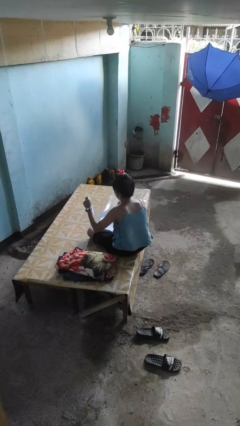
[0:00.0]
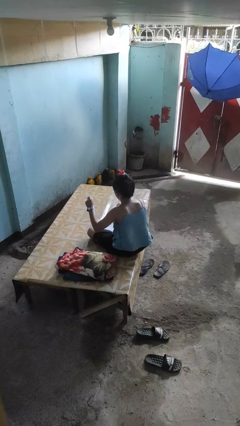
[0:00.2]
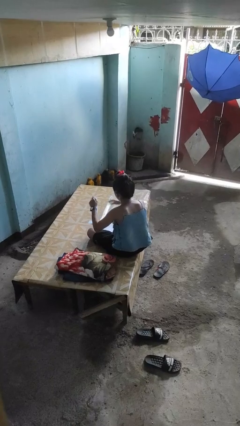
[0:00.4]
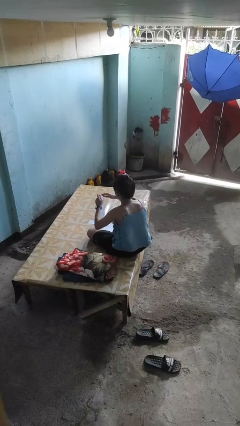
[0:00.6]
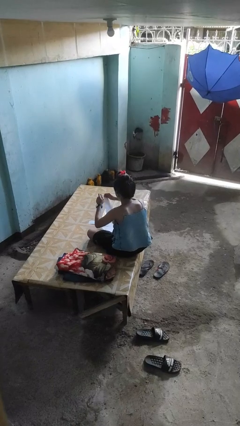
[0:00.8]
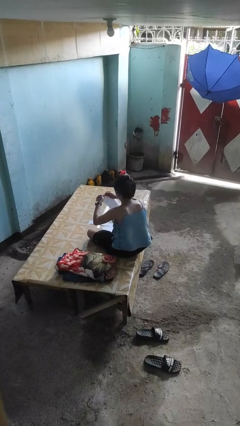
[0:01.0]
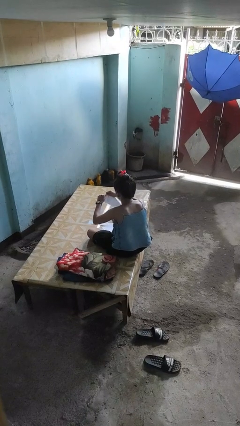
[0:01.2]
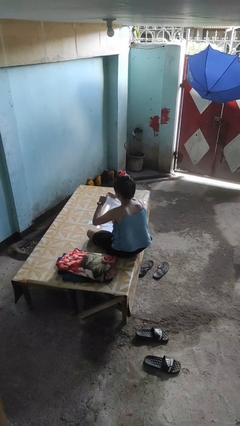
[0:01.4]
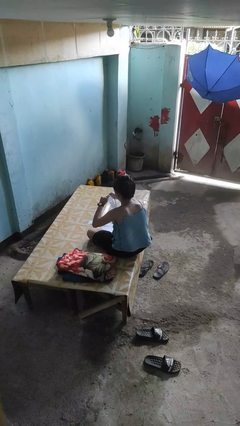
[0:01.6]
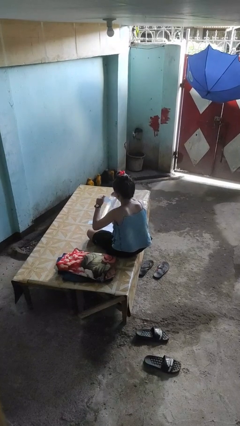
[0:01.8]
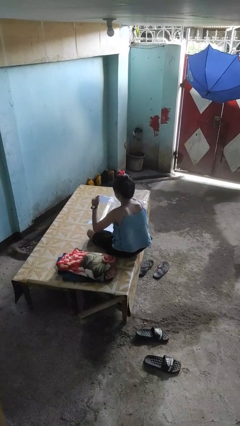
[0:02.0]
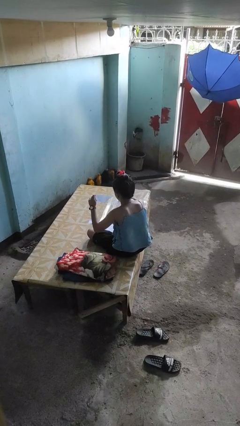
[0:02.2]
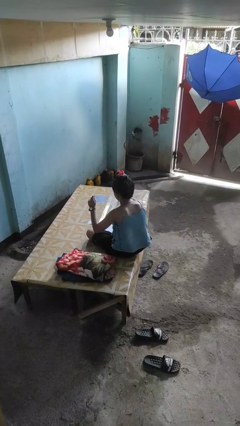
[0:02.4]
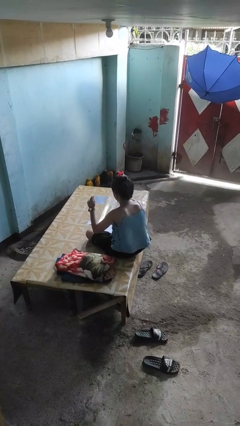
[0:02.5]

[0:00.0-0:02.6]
person tears paper

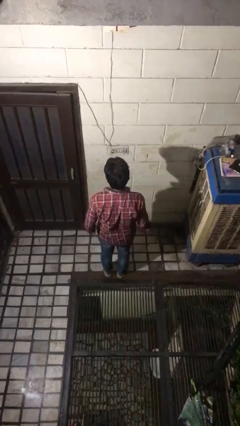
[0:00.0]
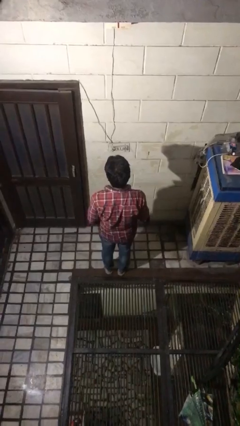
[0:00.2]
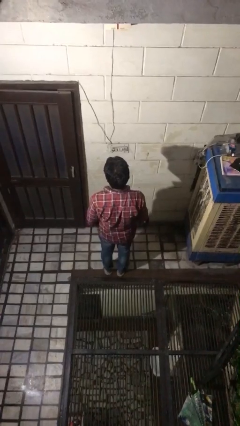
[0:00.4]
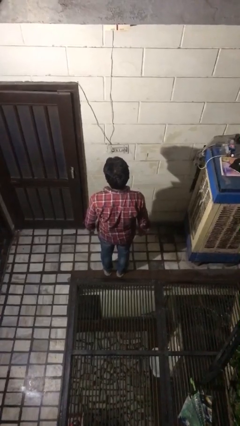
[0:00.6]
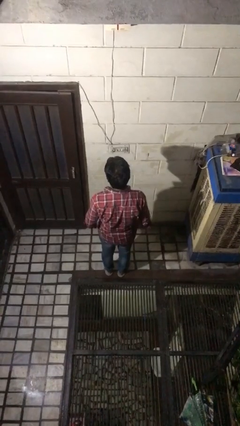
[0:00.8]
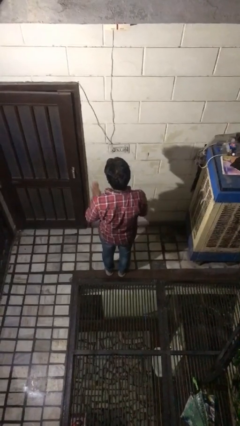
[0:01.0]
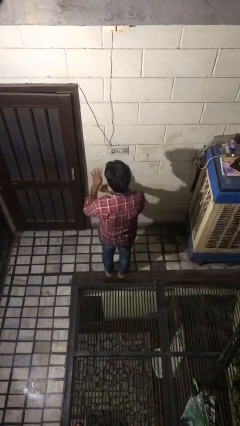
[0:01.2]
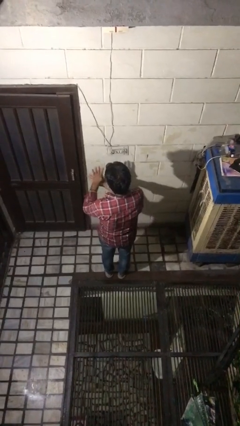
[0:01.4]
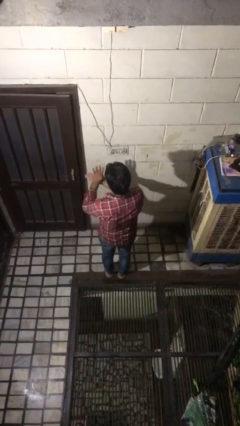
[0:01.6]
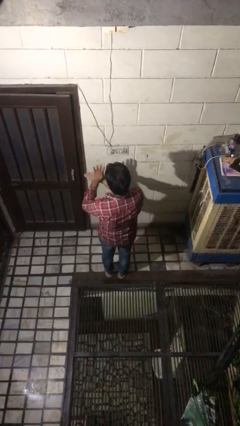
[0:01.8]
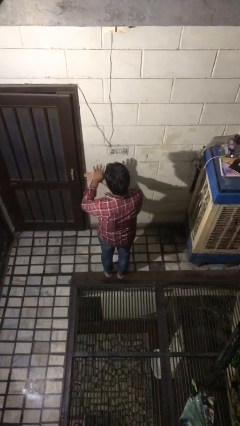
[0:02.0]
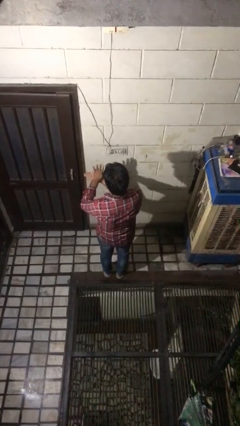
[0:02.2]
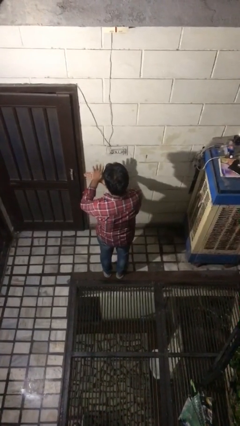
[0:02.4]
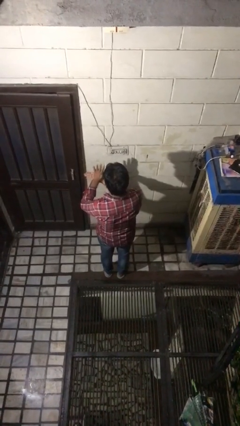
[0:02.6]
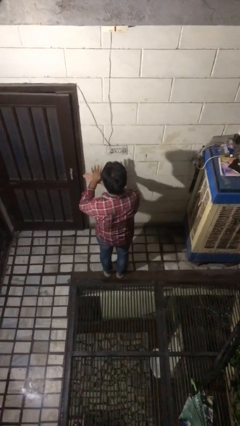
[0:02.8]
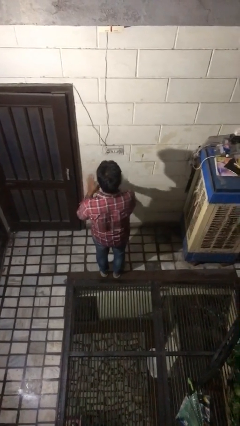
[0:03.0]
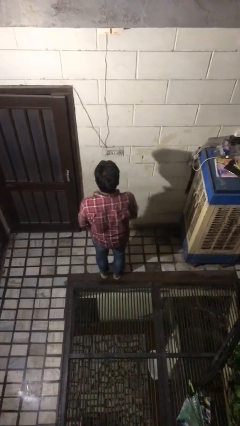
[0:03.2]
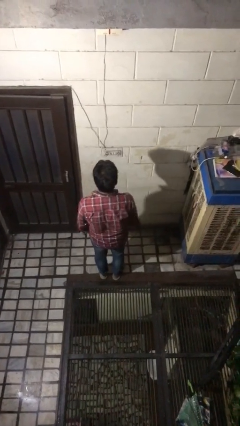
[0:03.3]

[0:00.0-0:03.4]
person gestures number four

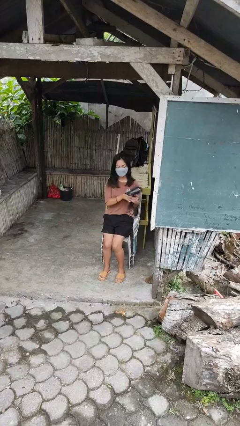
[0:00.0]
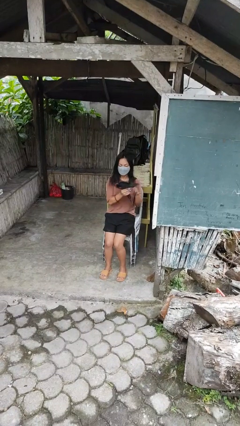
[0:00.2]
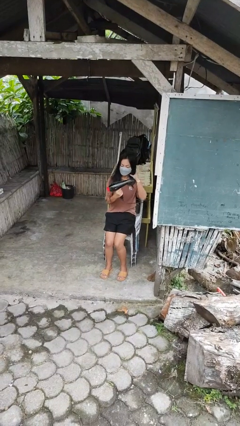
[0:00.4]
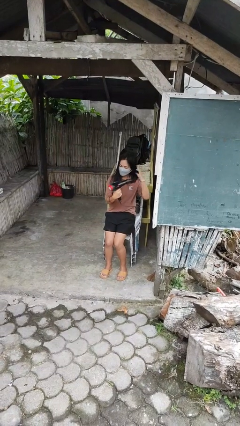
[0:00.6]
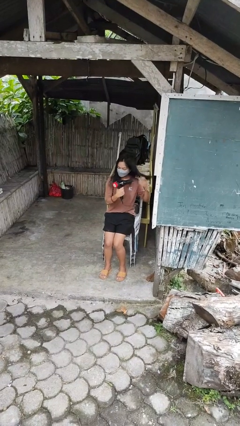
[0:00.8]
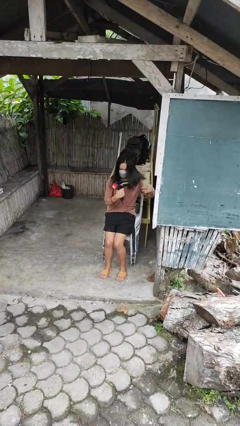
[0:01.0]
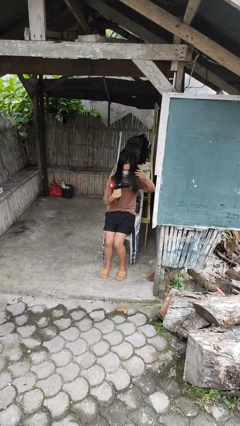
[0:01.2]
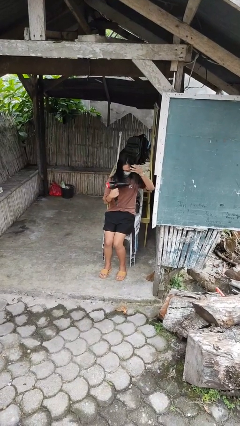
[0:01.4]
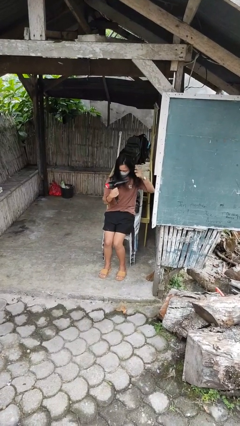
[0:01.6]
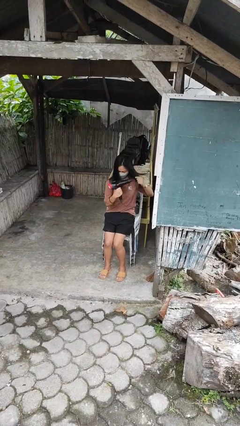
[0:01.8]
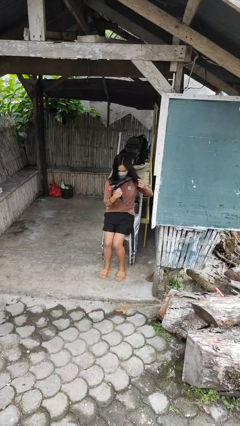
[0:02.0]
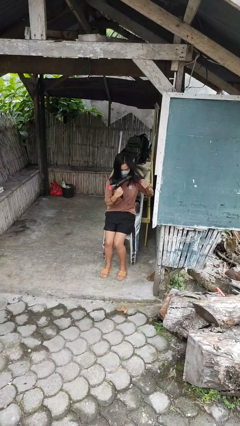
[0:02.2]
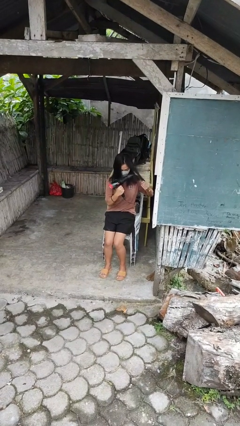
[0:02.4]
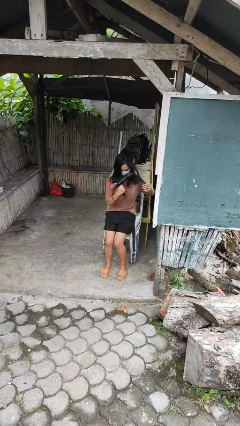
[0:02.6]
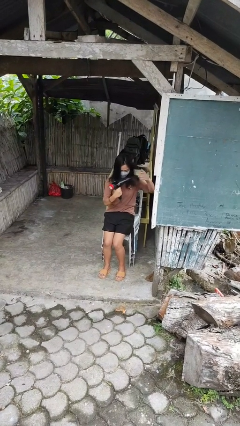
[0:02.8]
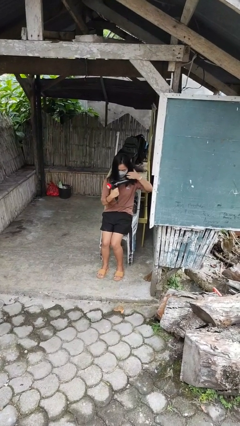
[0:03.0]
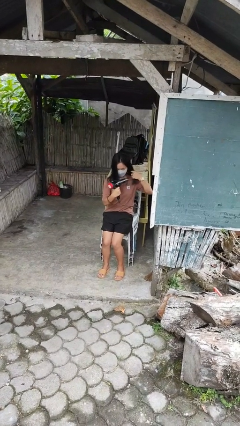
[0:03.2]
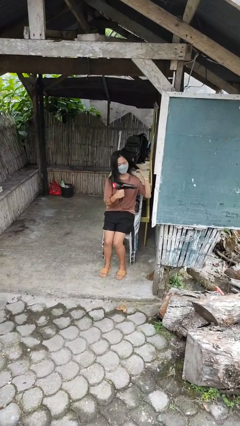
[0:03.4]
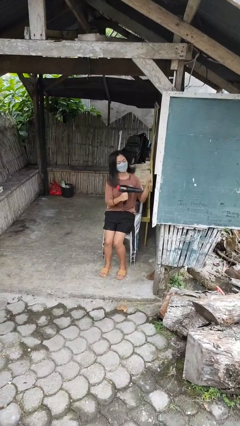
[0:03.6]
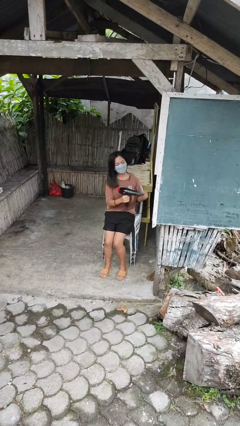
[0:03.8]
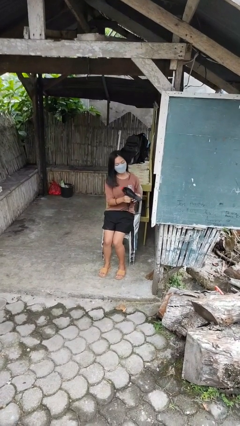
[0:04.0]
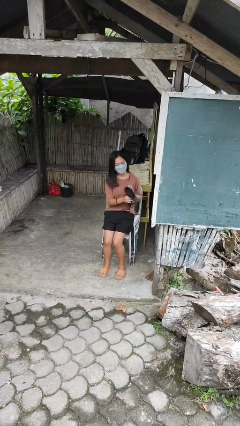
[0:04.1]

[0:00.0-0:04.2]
person dries hair with hairdryer

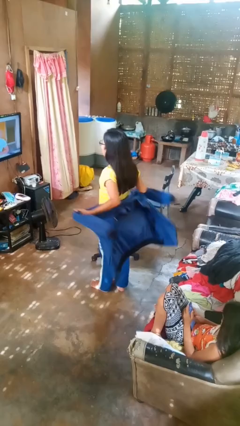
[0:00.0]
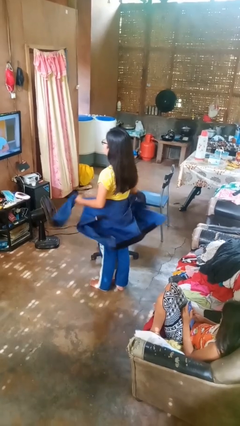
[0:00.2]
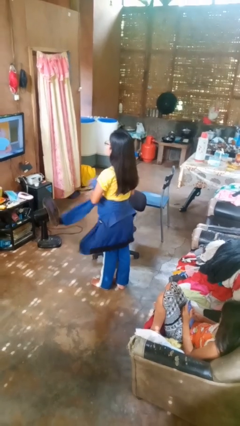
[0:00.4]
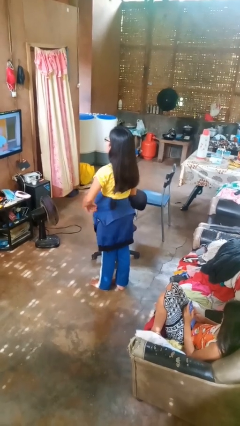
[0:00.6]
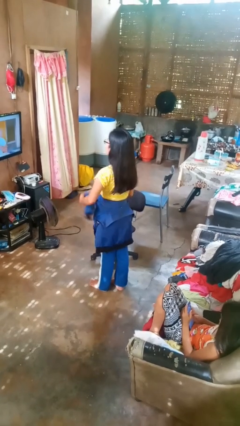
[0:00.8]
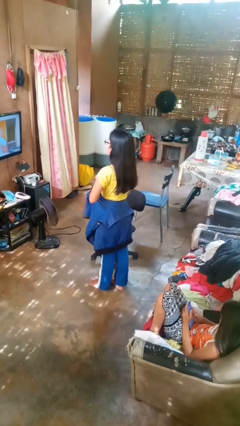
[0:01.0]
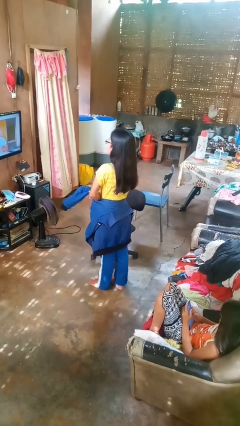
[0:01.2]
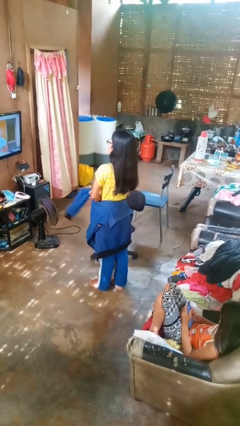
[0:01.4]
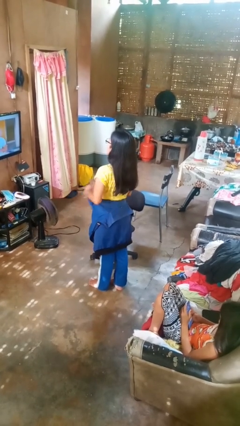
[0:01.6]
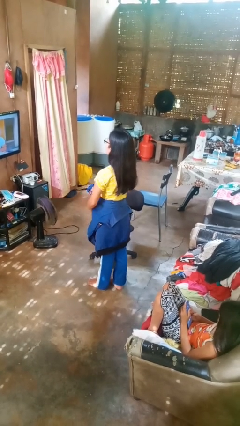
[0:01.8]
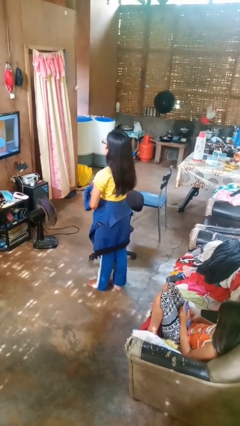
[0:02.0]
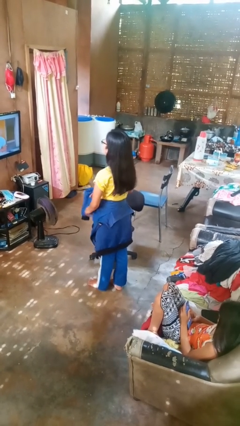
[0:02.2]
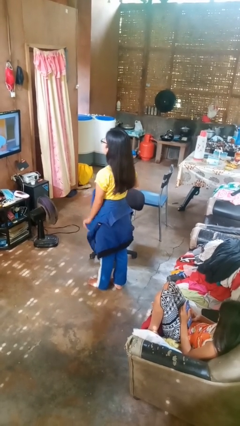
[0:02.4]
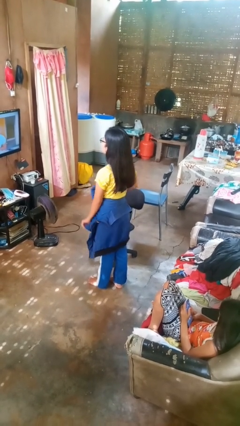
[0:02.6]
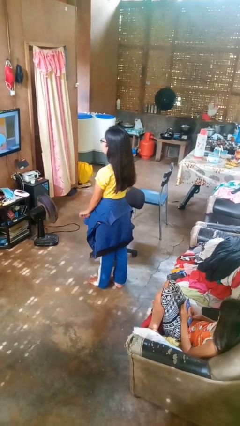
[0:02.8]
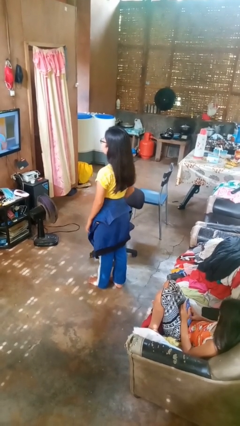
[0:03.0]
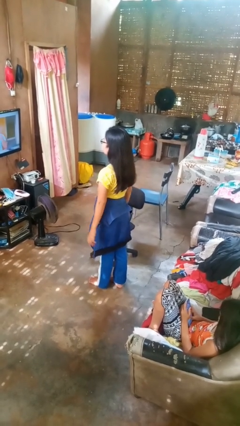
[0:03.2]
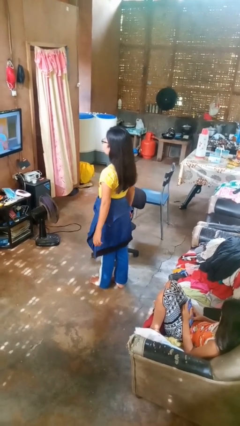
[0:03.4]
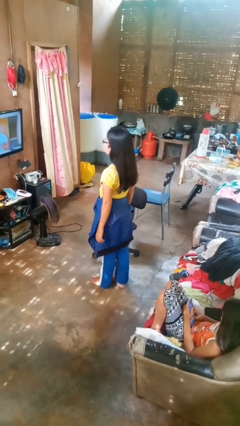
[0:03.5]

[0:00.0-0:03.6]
person ties jacket around waist

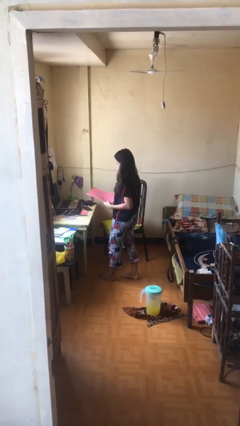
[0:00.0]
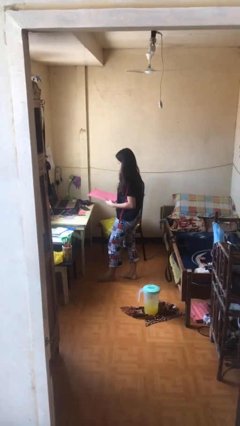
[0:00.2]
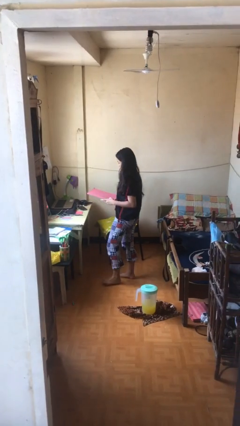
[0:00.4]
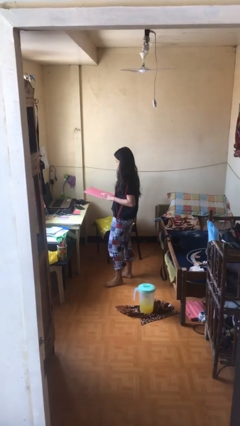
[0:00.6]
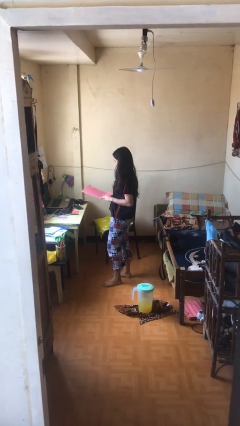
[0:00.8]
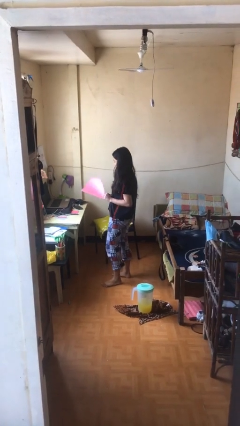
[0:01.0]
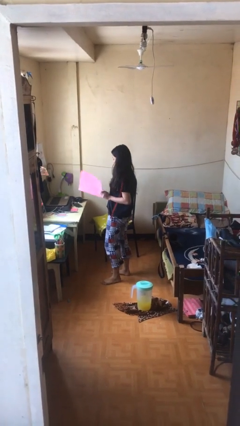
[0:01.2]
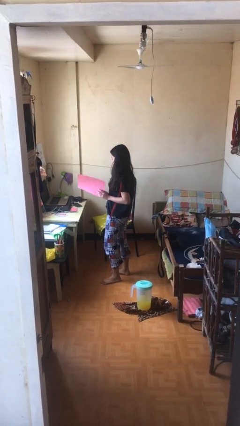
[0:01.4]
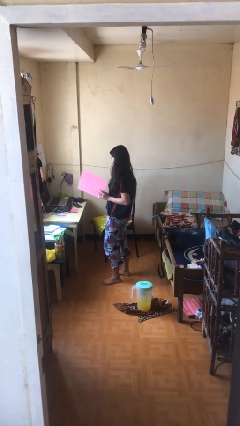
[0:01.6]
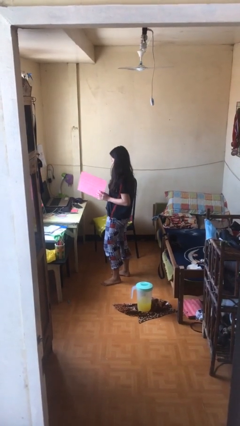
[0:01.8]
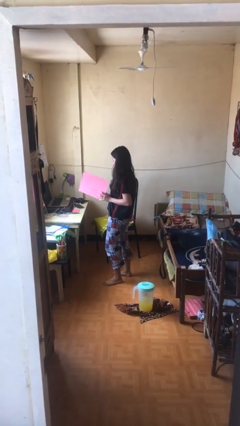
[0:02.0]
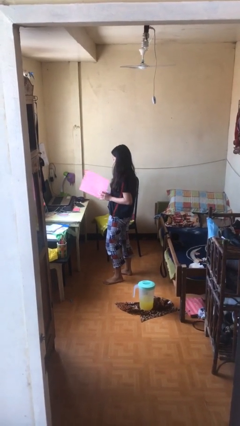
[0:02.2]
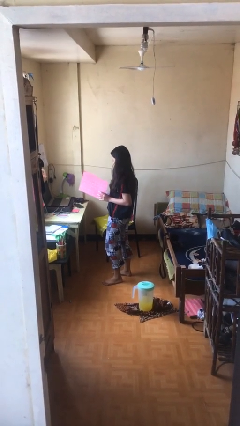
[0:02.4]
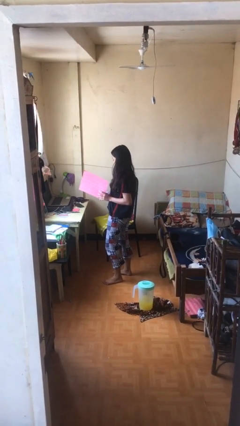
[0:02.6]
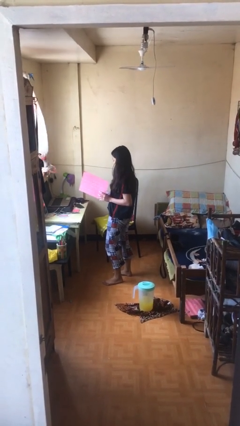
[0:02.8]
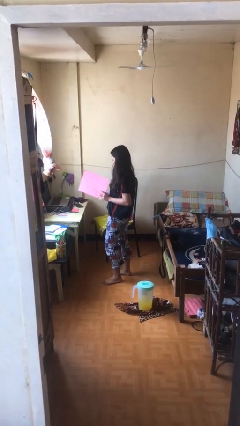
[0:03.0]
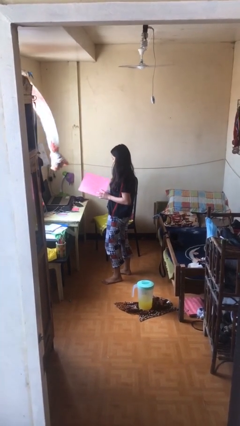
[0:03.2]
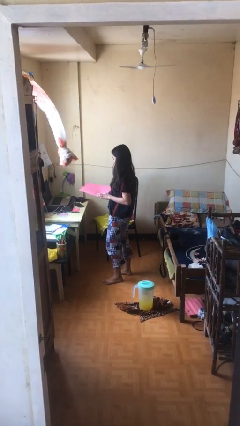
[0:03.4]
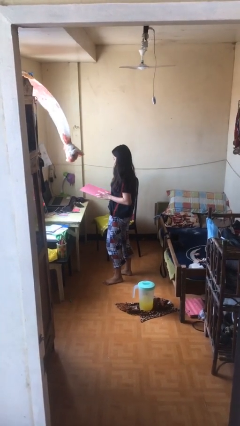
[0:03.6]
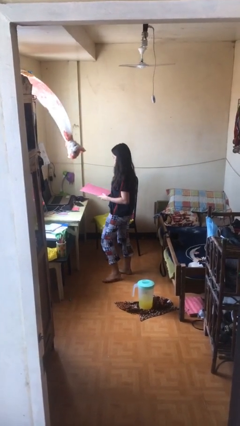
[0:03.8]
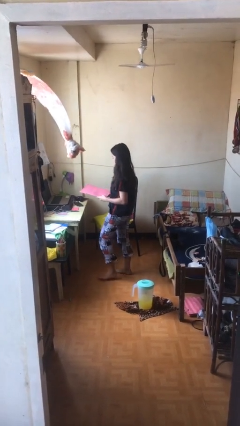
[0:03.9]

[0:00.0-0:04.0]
person reads document
